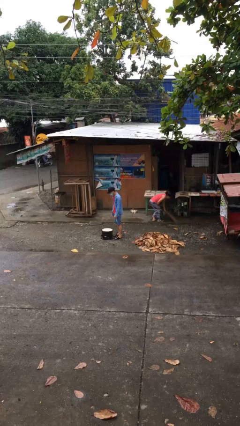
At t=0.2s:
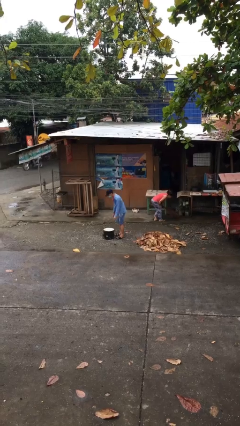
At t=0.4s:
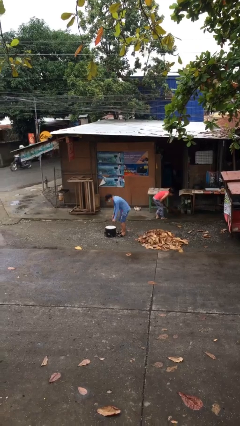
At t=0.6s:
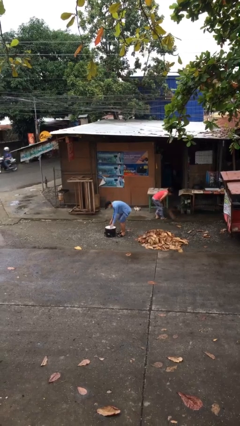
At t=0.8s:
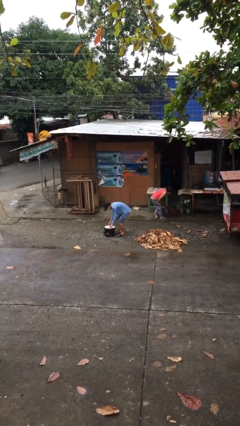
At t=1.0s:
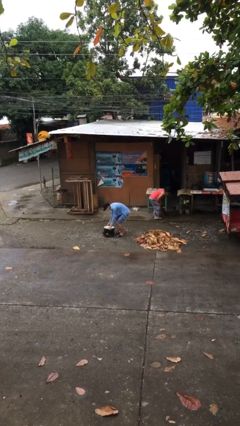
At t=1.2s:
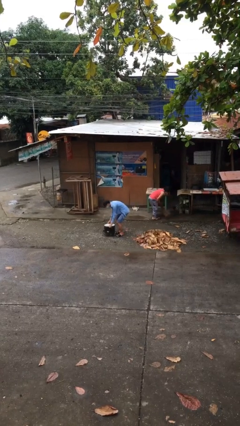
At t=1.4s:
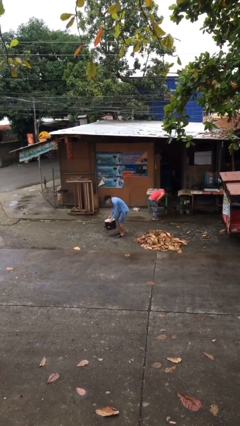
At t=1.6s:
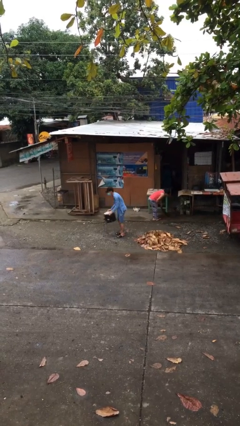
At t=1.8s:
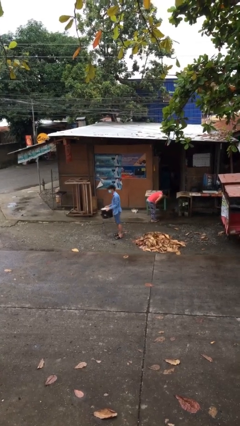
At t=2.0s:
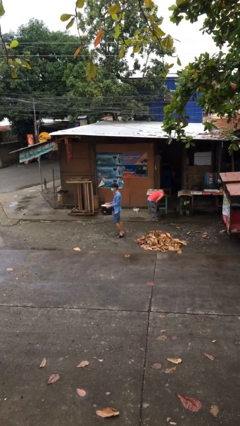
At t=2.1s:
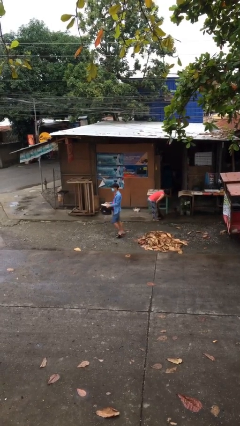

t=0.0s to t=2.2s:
person picks up object from floor

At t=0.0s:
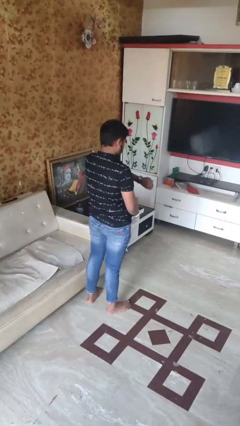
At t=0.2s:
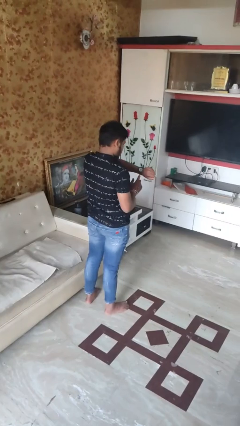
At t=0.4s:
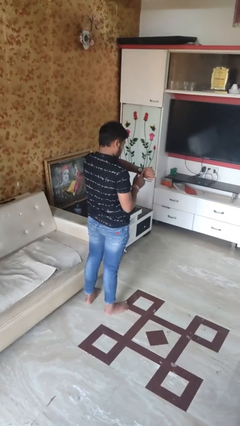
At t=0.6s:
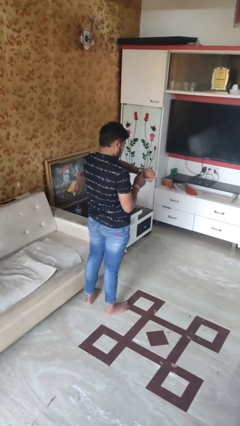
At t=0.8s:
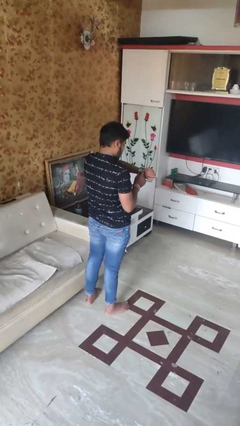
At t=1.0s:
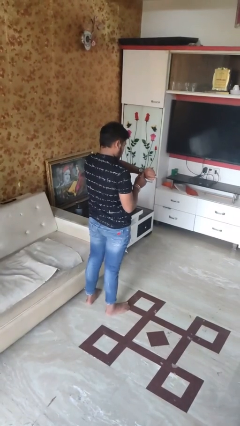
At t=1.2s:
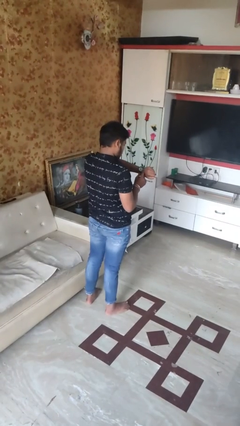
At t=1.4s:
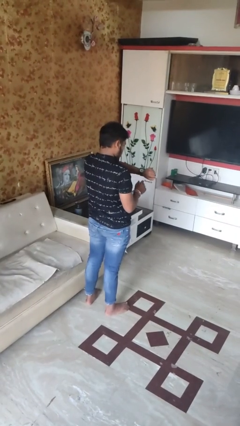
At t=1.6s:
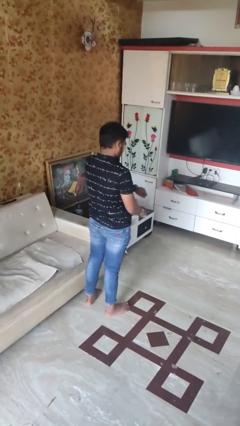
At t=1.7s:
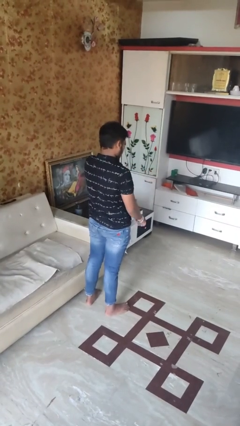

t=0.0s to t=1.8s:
person looks at wristwatch

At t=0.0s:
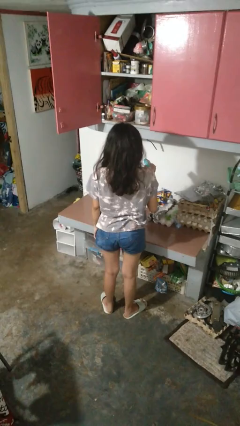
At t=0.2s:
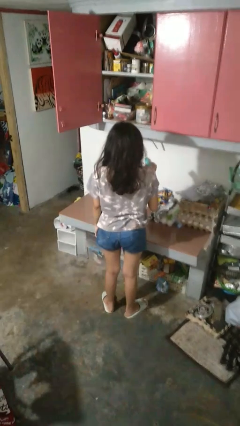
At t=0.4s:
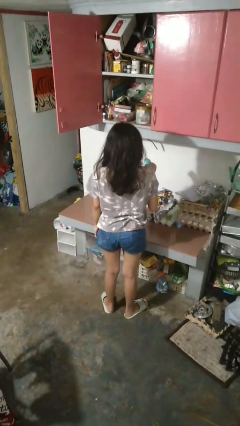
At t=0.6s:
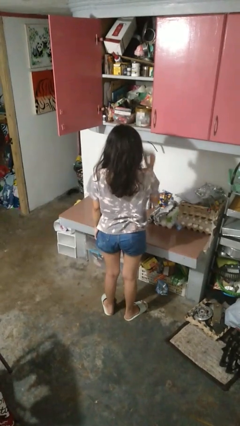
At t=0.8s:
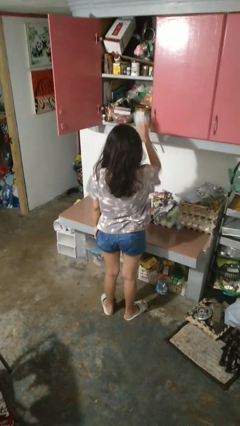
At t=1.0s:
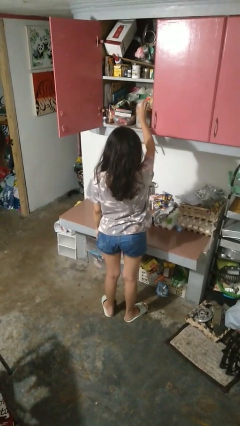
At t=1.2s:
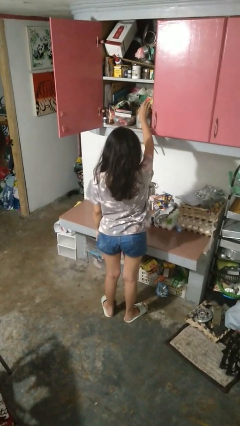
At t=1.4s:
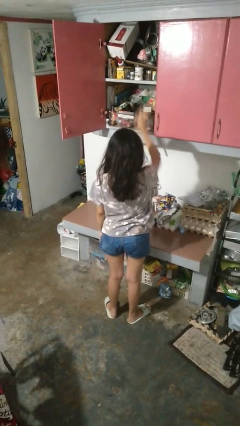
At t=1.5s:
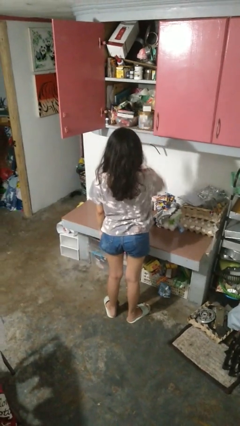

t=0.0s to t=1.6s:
person puts object in cabinet

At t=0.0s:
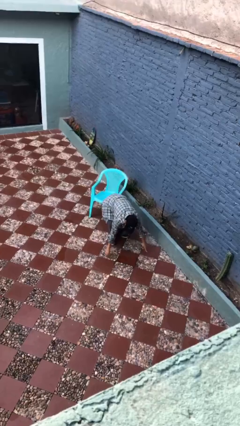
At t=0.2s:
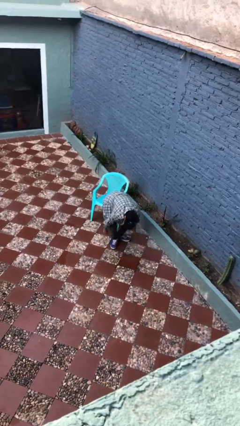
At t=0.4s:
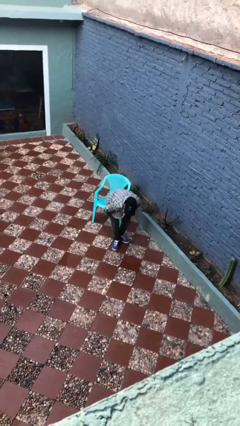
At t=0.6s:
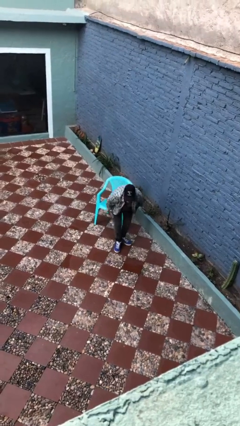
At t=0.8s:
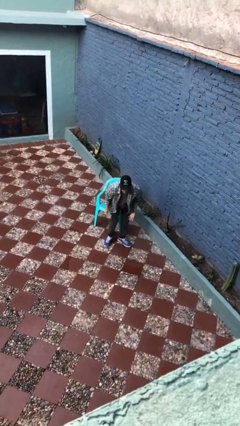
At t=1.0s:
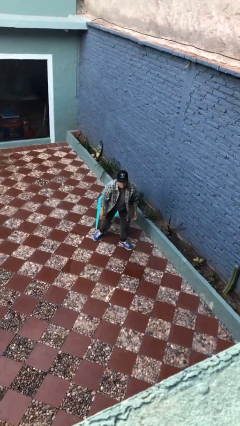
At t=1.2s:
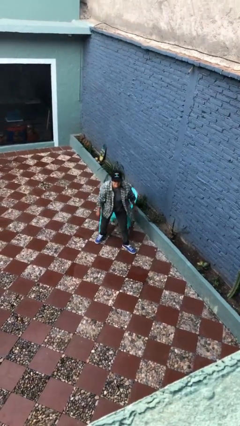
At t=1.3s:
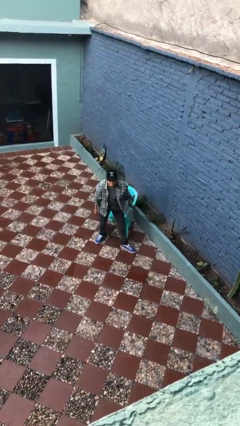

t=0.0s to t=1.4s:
person stands up from floor

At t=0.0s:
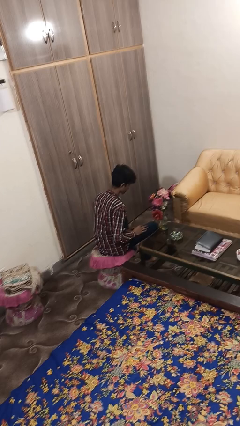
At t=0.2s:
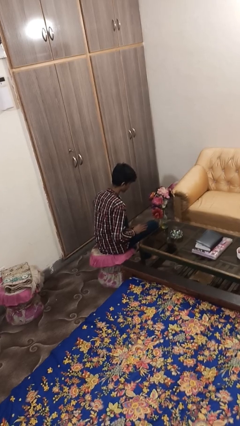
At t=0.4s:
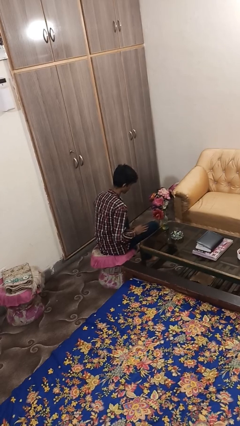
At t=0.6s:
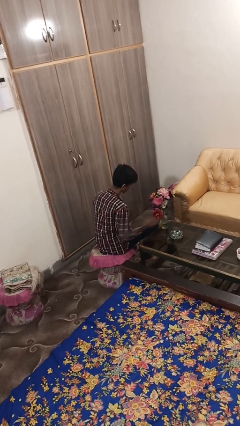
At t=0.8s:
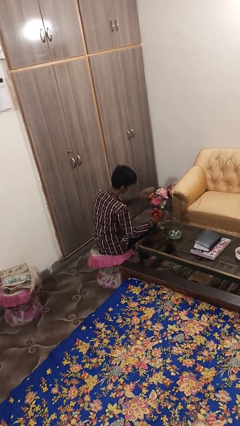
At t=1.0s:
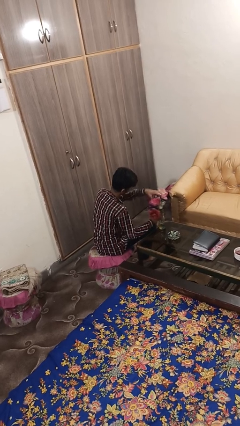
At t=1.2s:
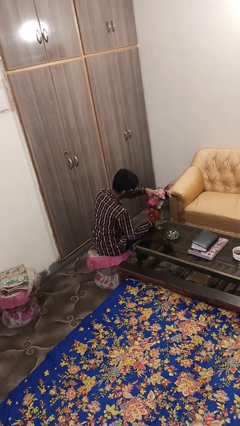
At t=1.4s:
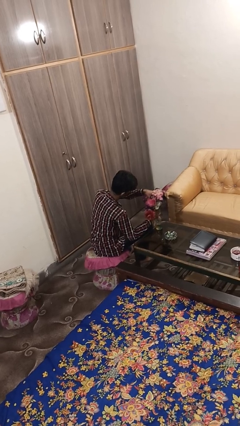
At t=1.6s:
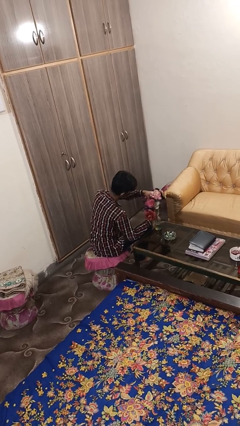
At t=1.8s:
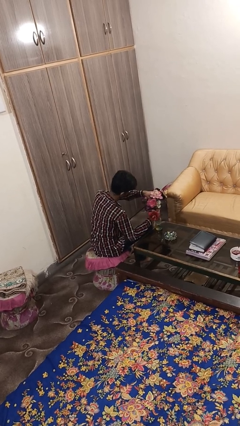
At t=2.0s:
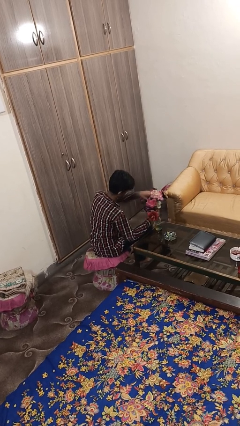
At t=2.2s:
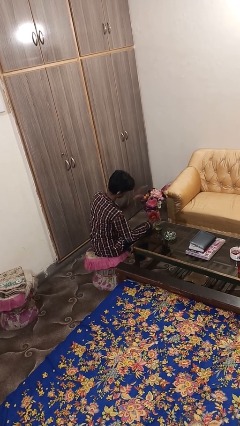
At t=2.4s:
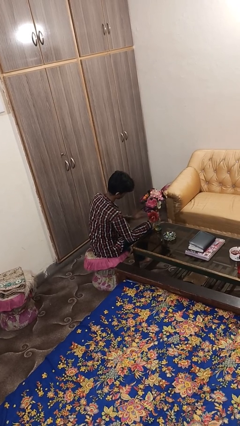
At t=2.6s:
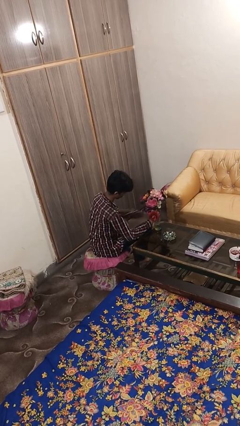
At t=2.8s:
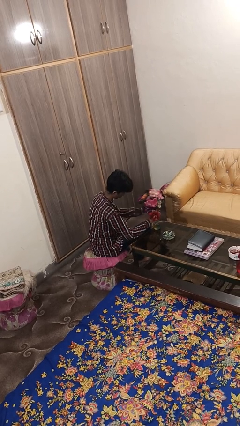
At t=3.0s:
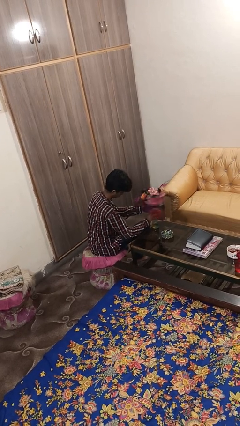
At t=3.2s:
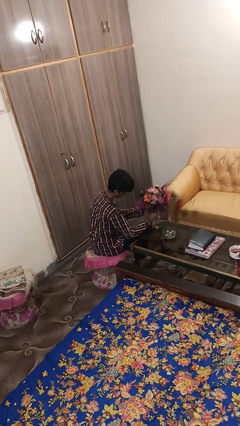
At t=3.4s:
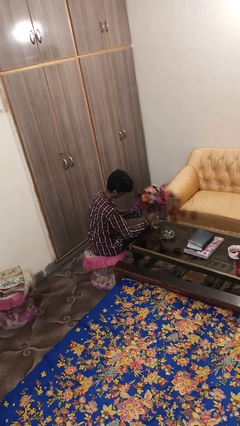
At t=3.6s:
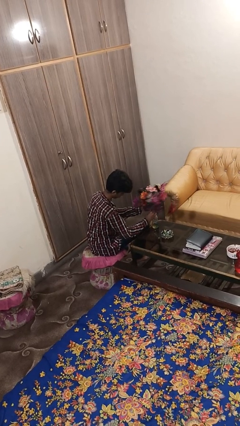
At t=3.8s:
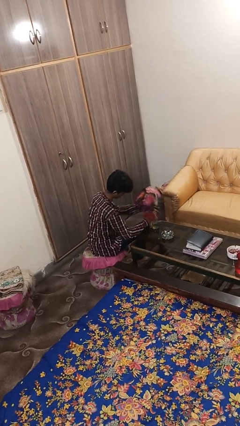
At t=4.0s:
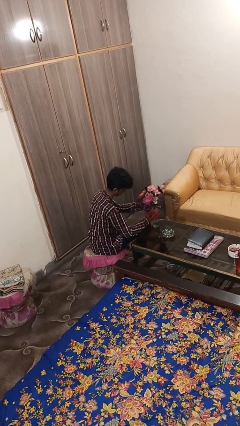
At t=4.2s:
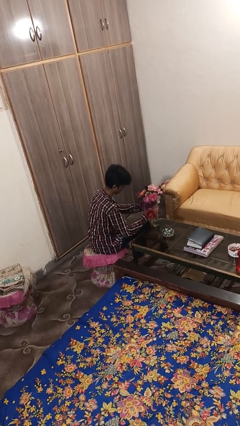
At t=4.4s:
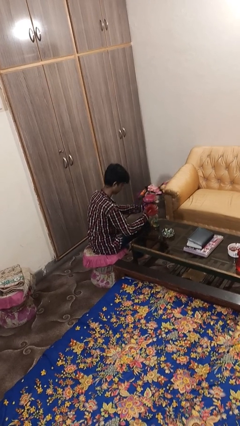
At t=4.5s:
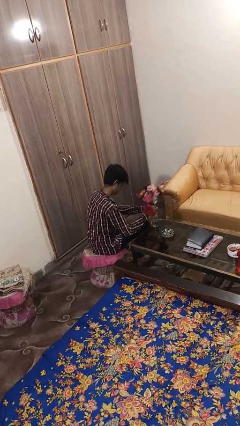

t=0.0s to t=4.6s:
person arranges flowers in vase

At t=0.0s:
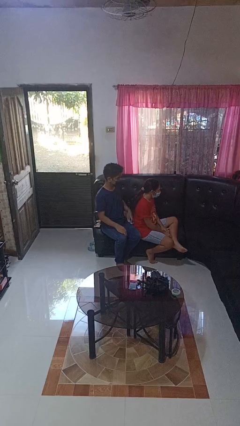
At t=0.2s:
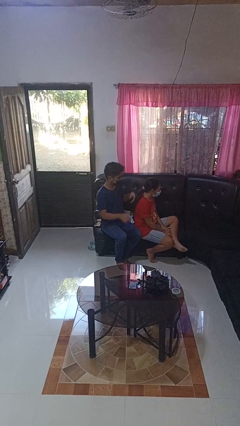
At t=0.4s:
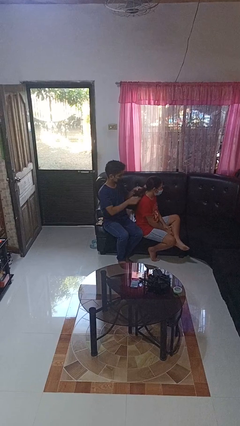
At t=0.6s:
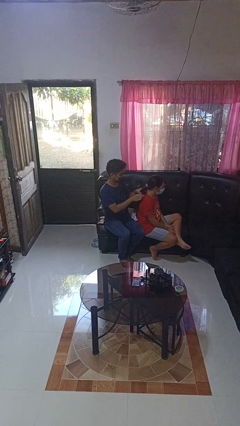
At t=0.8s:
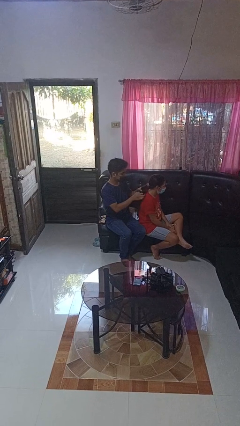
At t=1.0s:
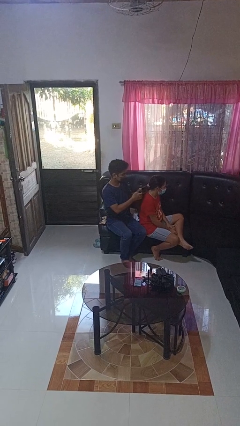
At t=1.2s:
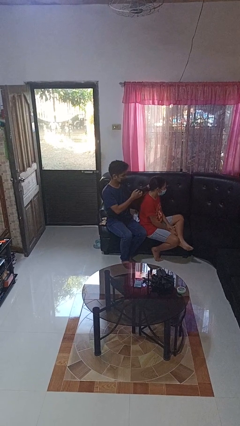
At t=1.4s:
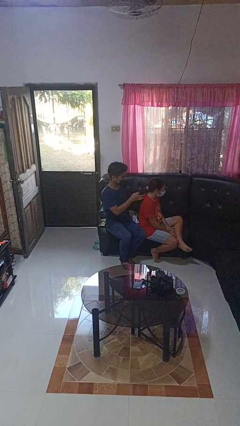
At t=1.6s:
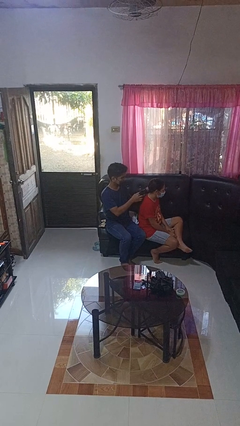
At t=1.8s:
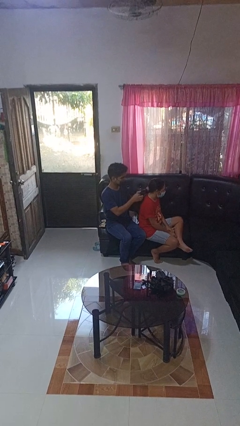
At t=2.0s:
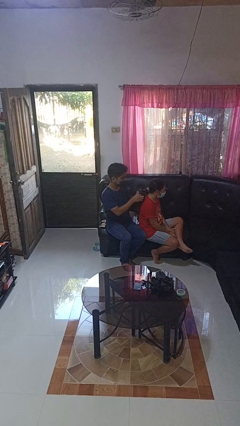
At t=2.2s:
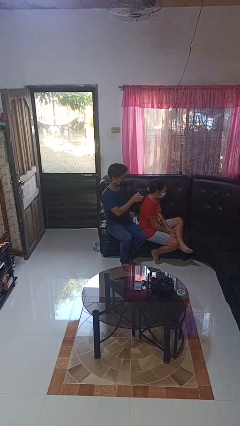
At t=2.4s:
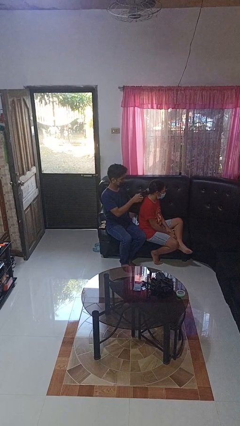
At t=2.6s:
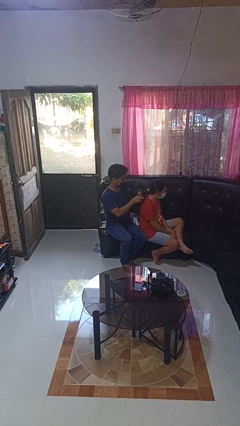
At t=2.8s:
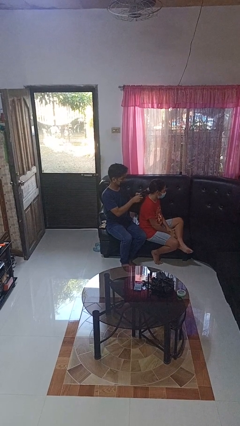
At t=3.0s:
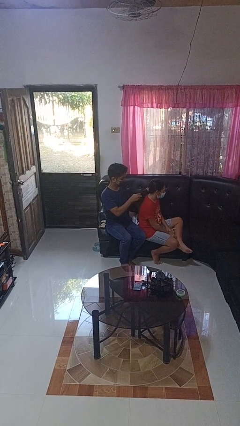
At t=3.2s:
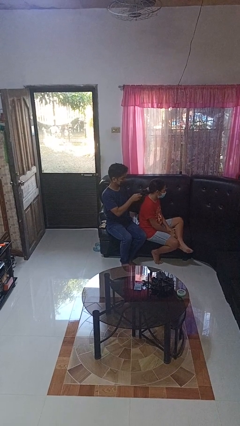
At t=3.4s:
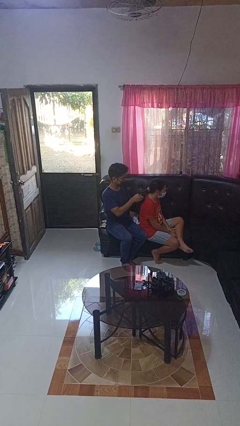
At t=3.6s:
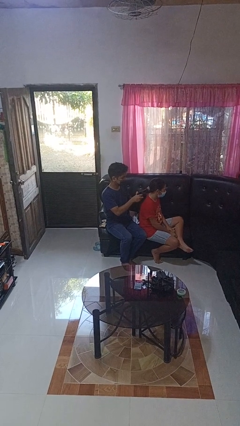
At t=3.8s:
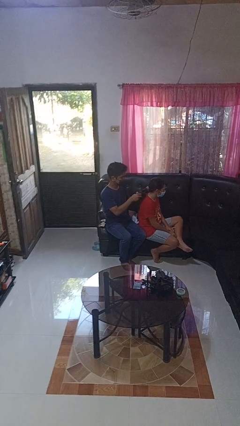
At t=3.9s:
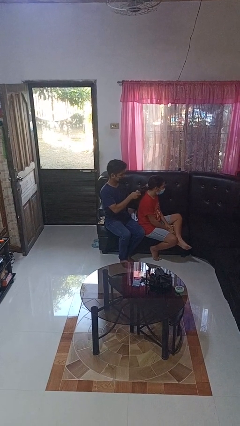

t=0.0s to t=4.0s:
person braids hair of person

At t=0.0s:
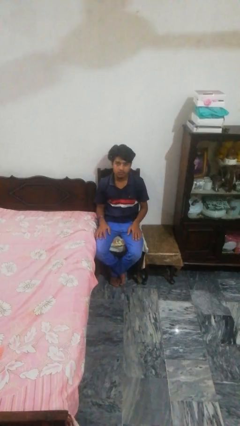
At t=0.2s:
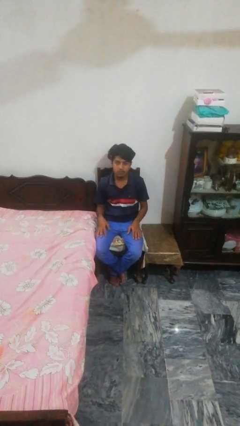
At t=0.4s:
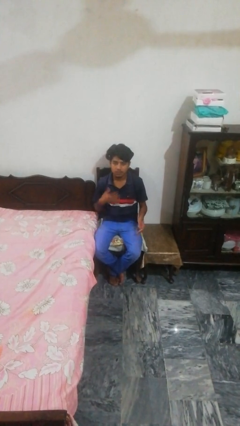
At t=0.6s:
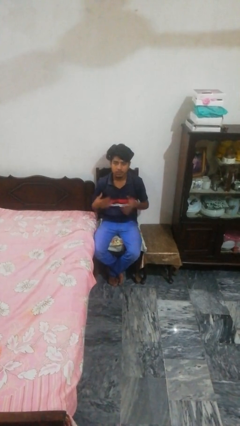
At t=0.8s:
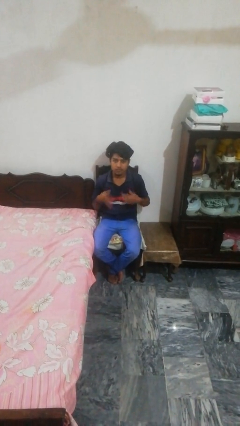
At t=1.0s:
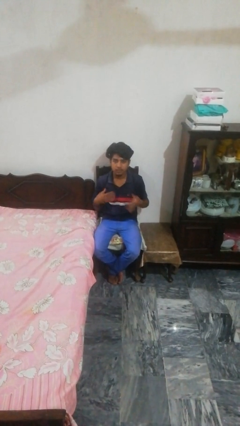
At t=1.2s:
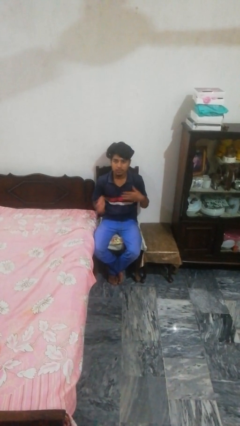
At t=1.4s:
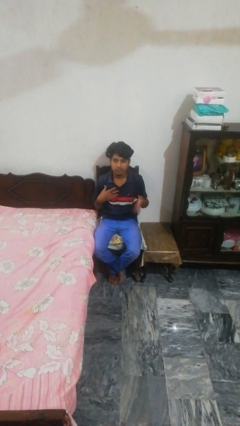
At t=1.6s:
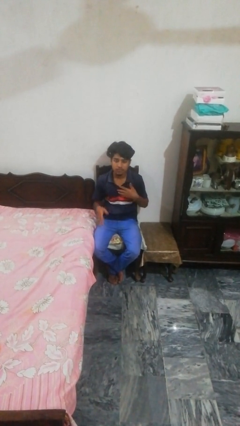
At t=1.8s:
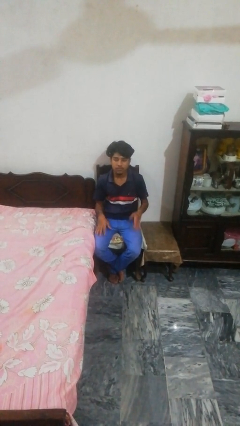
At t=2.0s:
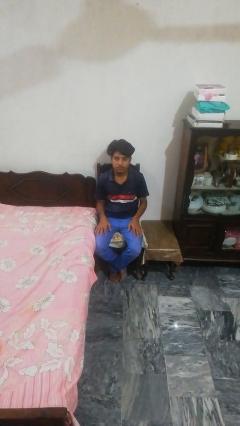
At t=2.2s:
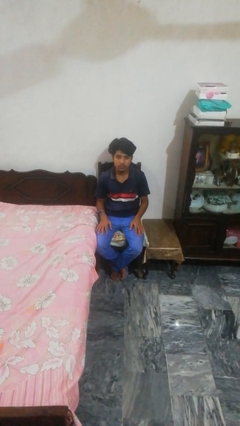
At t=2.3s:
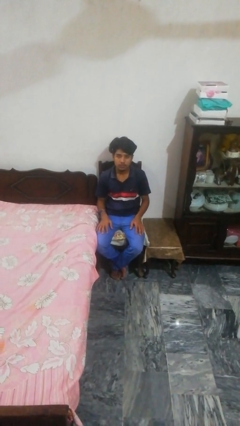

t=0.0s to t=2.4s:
person drums on chest
